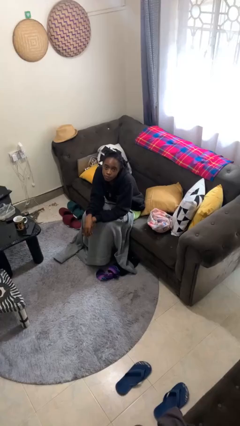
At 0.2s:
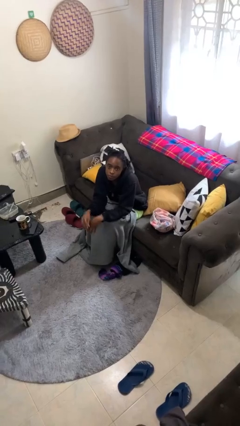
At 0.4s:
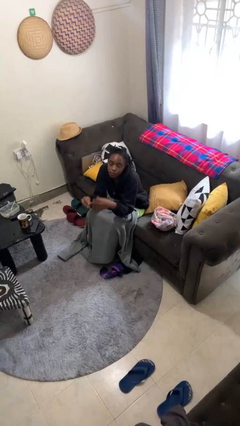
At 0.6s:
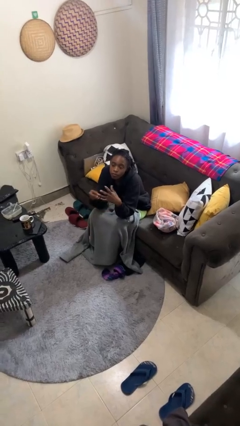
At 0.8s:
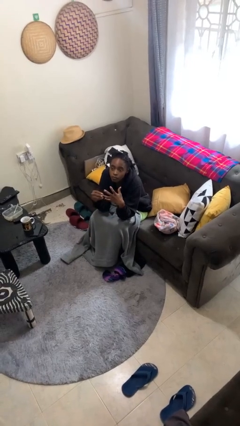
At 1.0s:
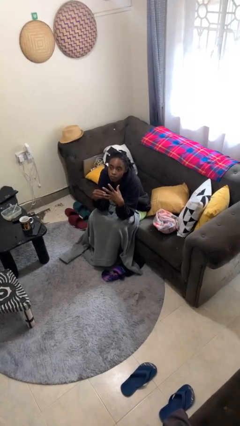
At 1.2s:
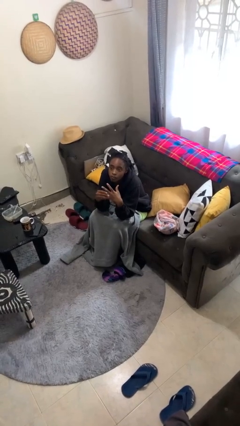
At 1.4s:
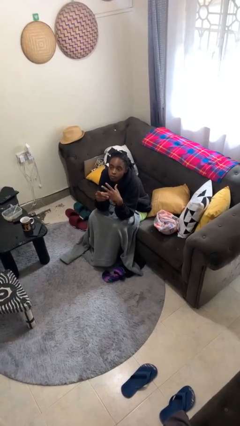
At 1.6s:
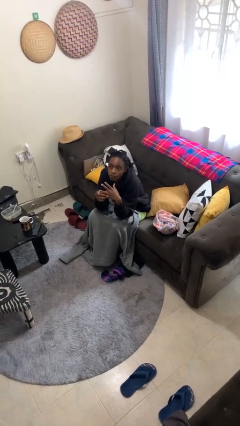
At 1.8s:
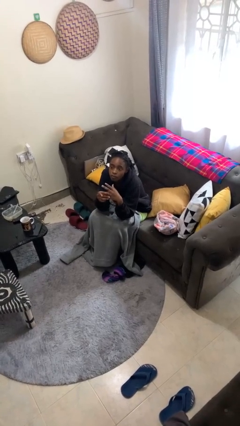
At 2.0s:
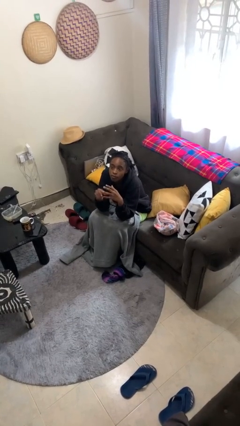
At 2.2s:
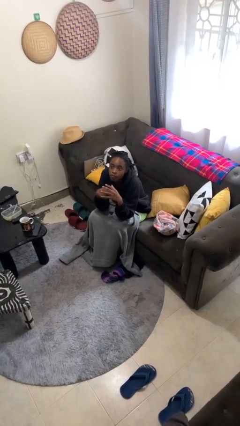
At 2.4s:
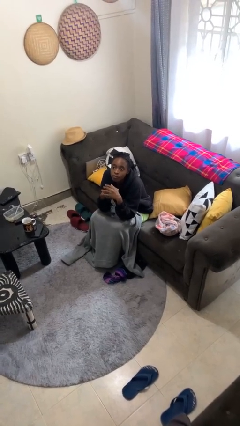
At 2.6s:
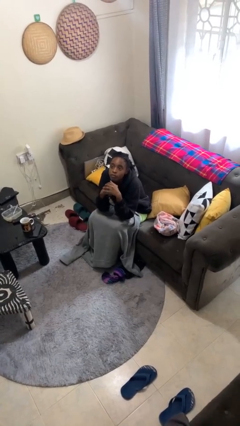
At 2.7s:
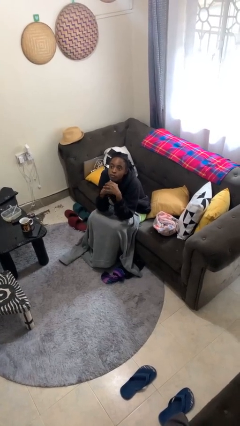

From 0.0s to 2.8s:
person puts on ring

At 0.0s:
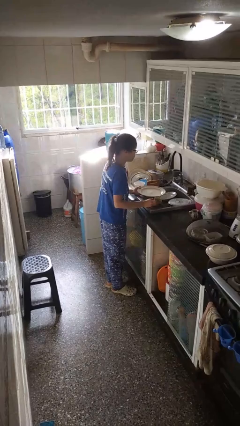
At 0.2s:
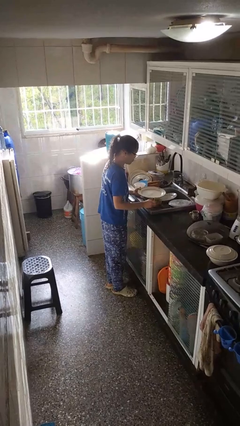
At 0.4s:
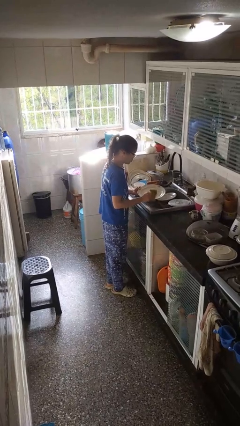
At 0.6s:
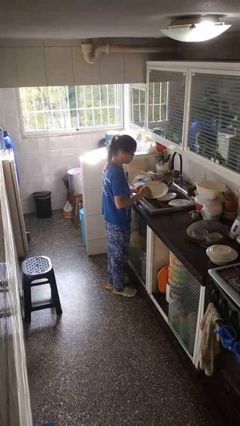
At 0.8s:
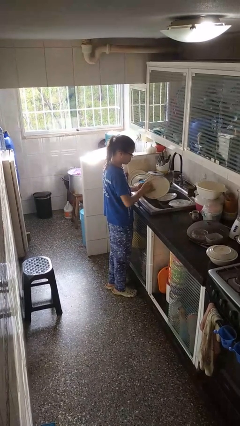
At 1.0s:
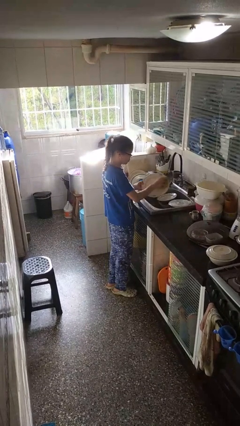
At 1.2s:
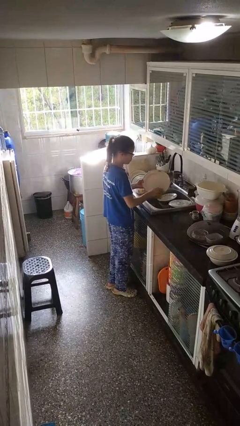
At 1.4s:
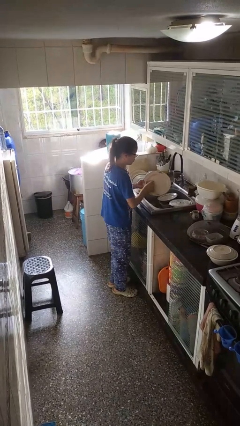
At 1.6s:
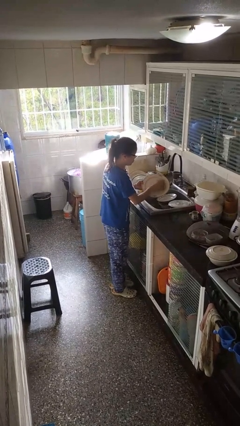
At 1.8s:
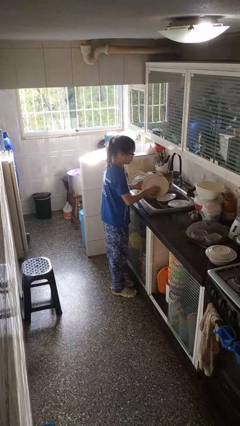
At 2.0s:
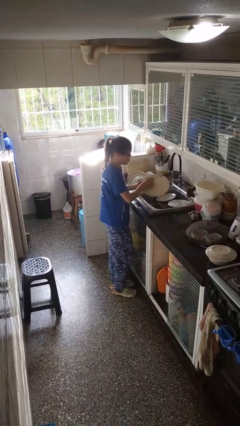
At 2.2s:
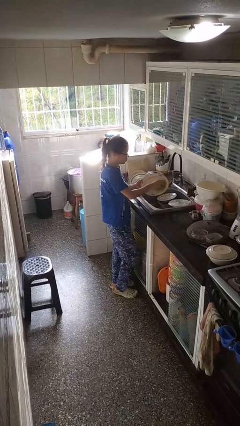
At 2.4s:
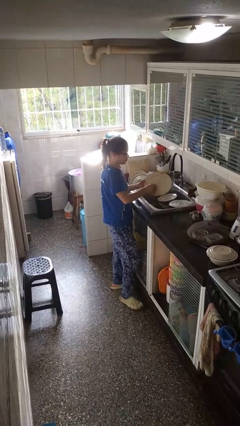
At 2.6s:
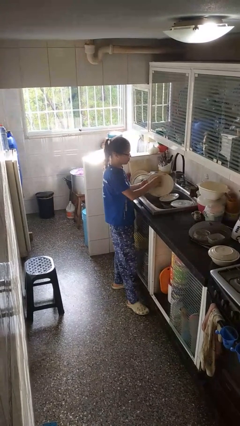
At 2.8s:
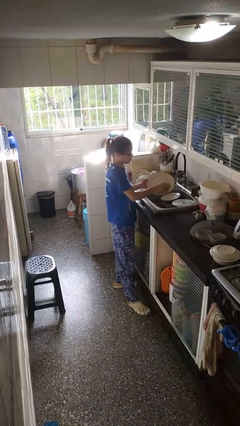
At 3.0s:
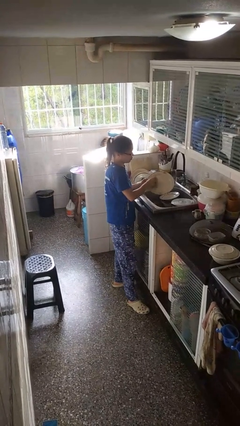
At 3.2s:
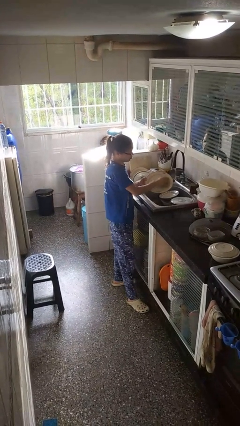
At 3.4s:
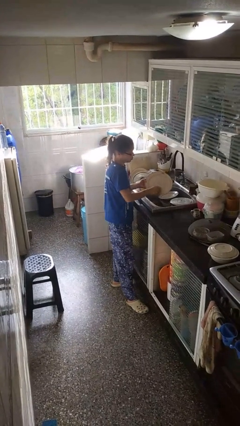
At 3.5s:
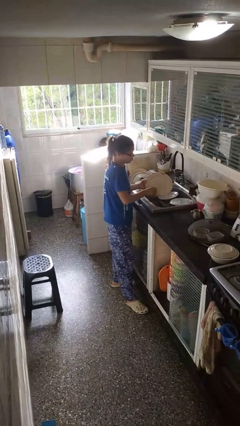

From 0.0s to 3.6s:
person washes dish

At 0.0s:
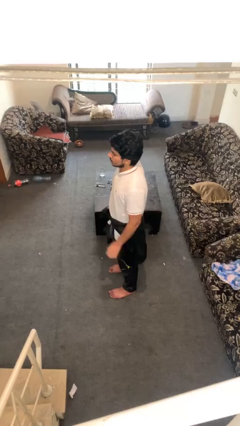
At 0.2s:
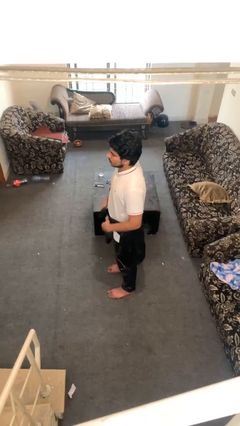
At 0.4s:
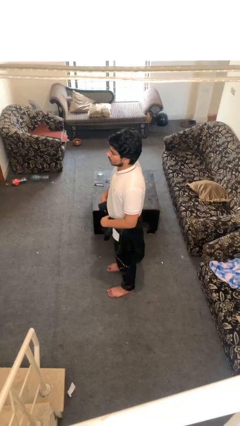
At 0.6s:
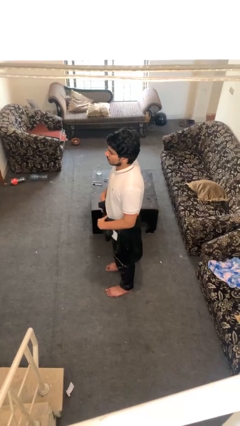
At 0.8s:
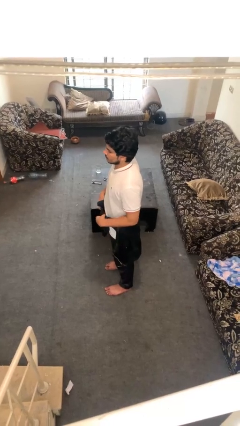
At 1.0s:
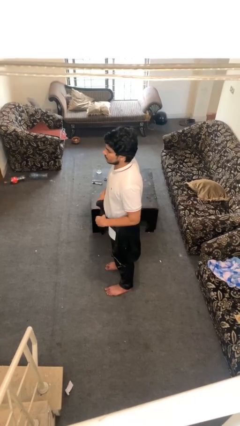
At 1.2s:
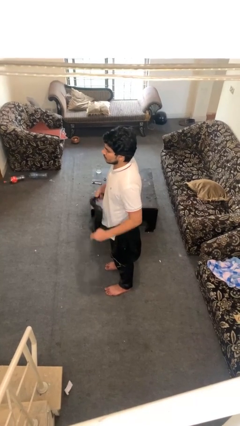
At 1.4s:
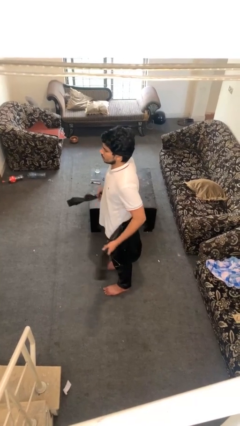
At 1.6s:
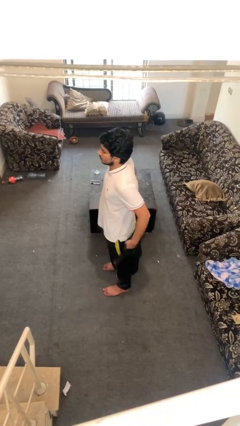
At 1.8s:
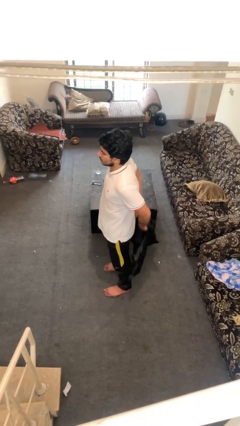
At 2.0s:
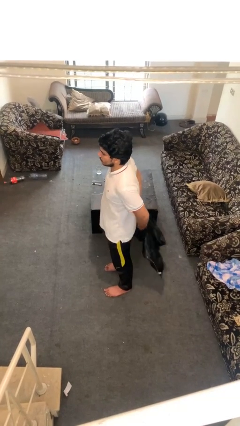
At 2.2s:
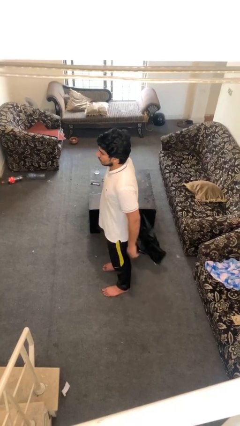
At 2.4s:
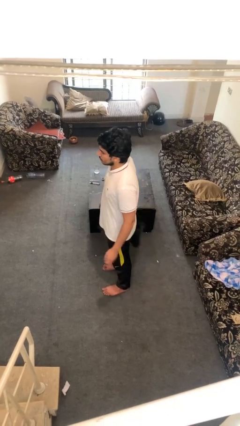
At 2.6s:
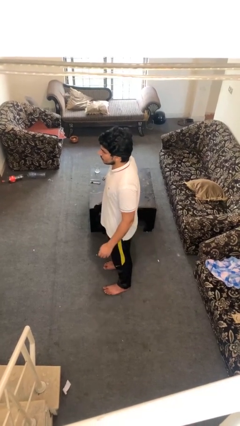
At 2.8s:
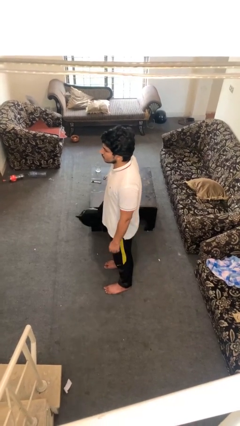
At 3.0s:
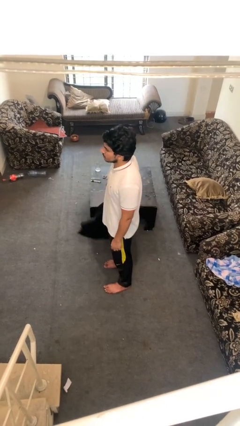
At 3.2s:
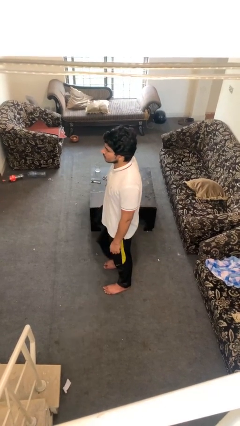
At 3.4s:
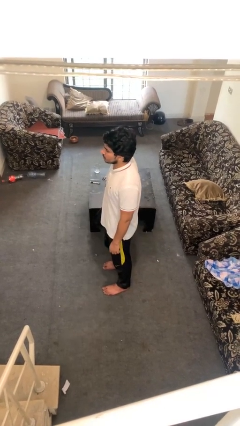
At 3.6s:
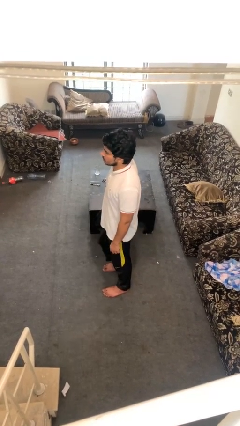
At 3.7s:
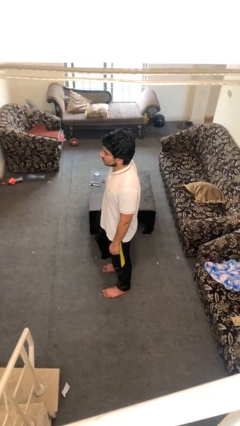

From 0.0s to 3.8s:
person unties jacket around waist

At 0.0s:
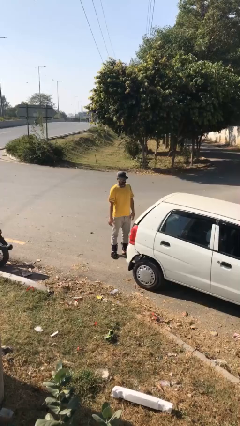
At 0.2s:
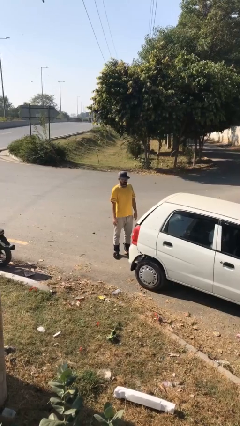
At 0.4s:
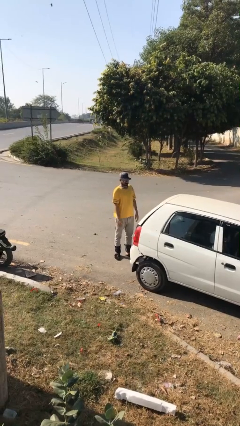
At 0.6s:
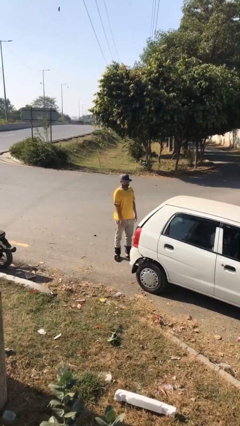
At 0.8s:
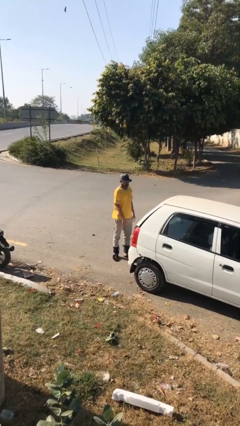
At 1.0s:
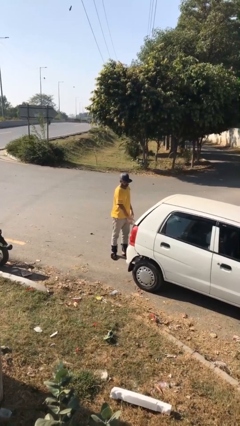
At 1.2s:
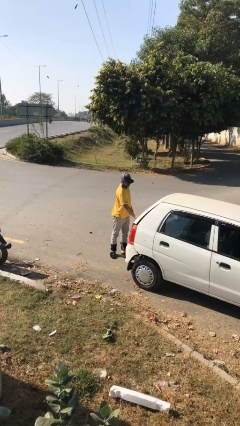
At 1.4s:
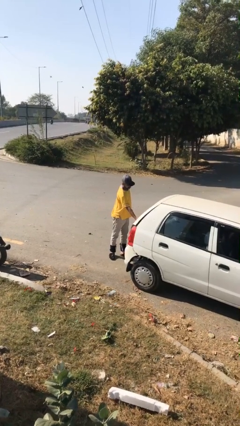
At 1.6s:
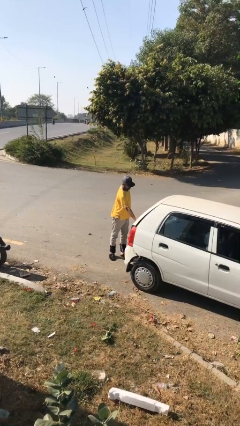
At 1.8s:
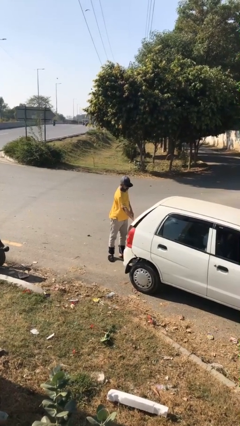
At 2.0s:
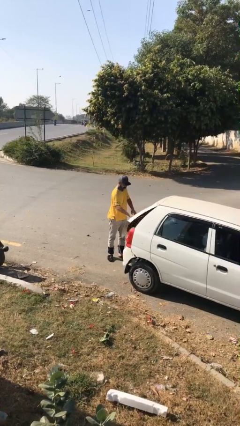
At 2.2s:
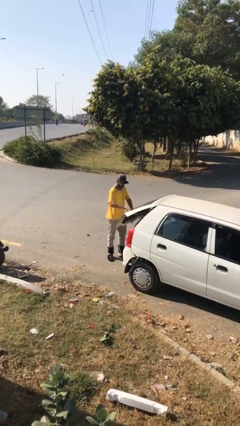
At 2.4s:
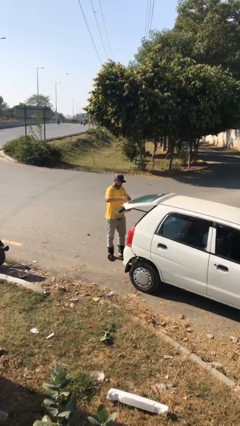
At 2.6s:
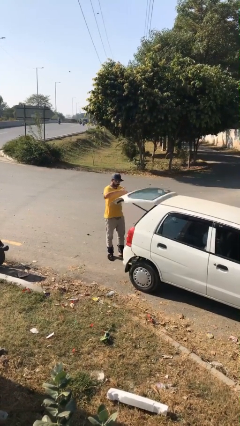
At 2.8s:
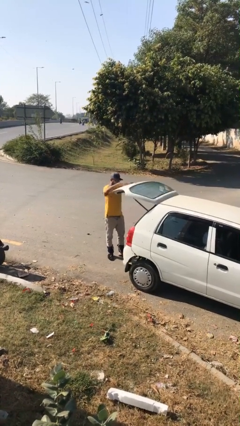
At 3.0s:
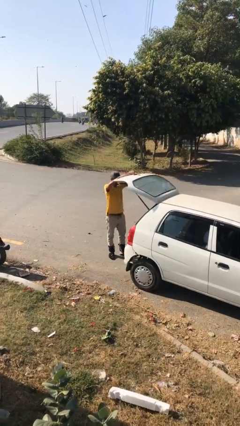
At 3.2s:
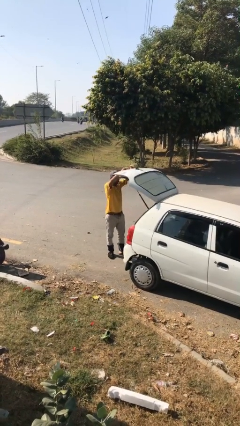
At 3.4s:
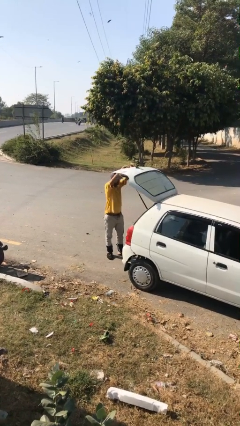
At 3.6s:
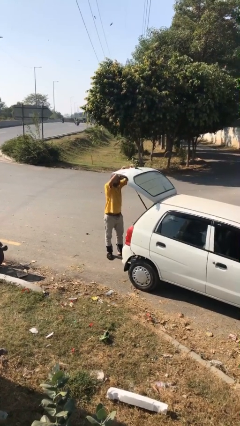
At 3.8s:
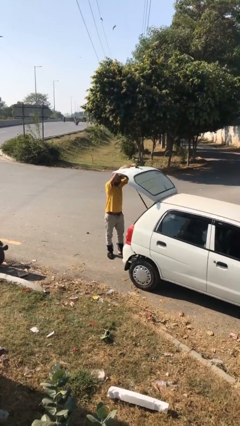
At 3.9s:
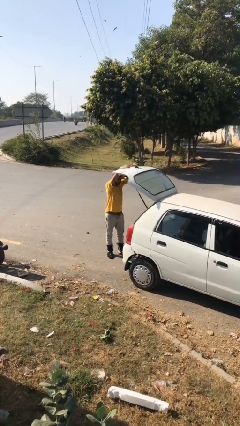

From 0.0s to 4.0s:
person opens car trunk

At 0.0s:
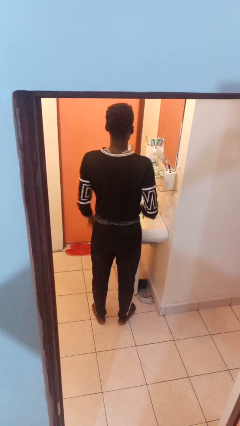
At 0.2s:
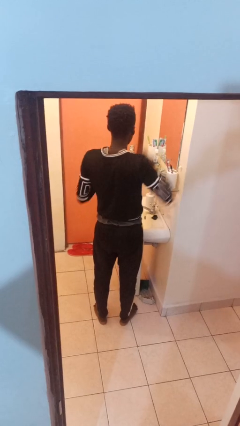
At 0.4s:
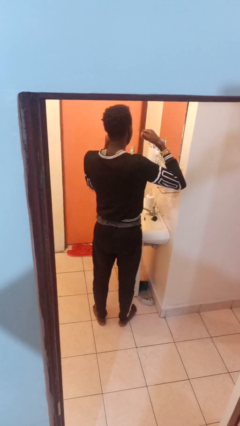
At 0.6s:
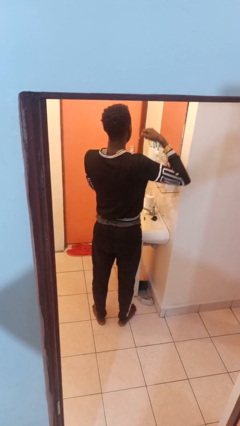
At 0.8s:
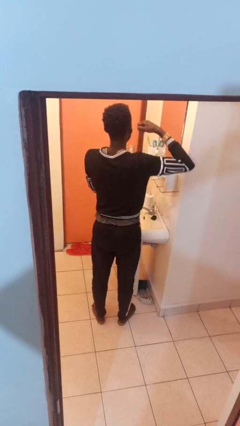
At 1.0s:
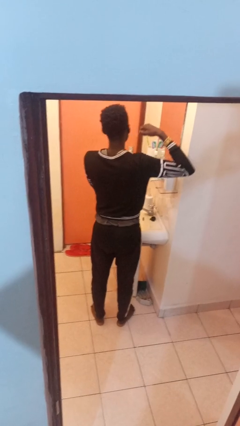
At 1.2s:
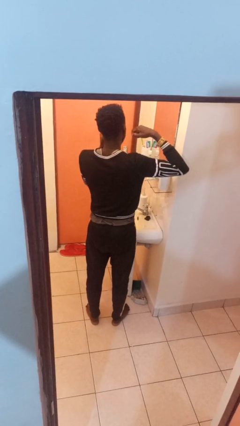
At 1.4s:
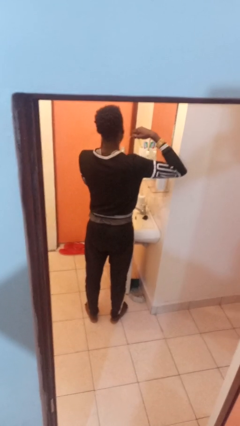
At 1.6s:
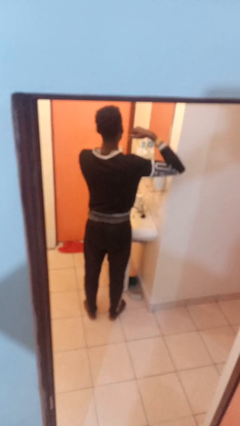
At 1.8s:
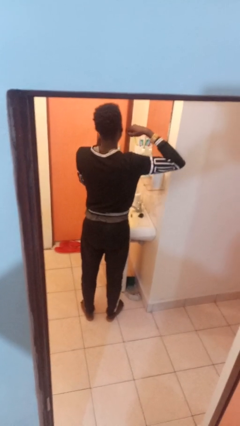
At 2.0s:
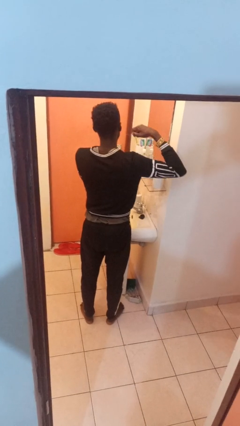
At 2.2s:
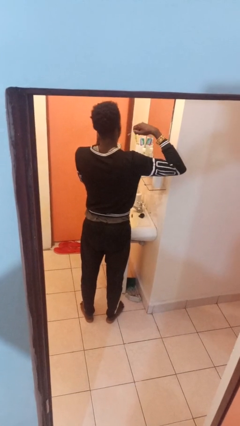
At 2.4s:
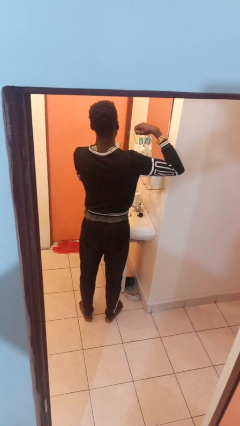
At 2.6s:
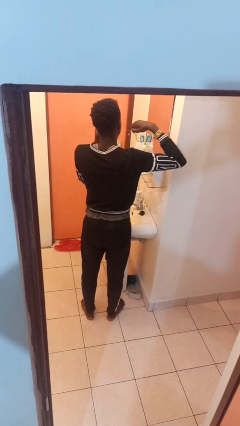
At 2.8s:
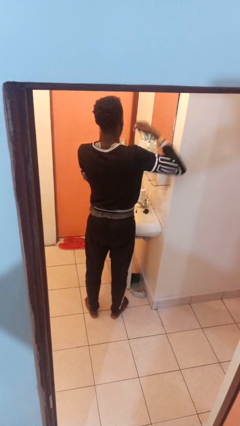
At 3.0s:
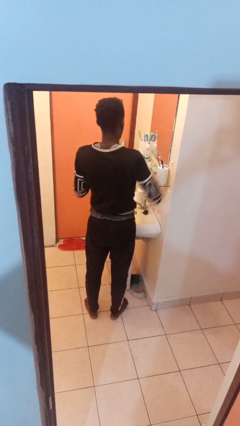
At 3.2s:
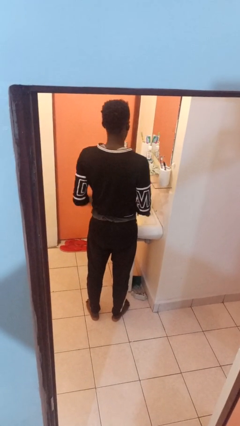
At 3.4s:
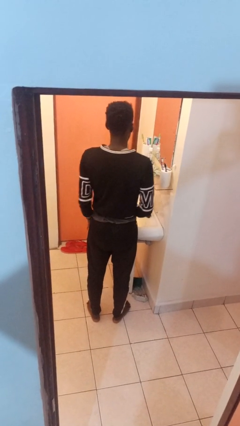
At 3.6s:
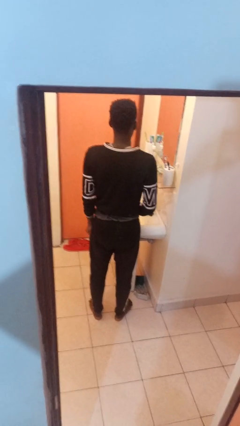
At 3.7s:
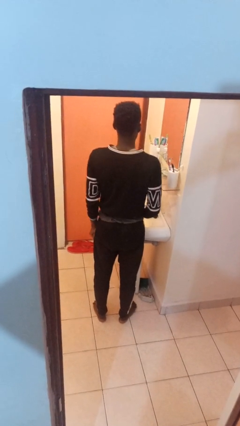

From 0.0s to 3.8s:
person flosses
